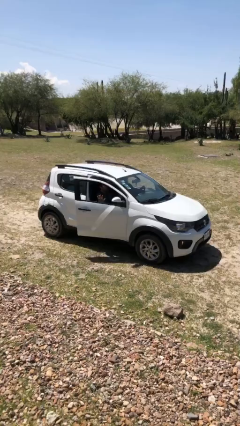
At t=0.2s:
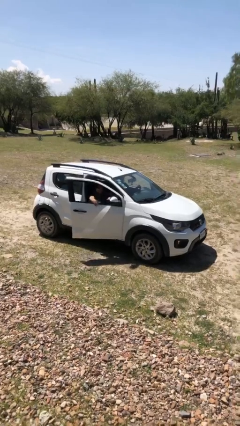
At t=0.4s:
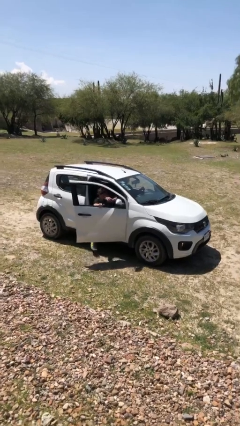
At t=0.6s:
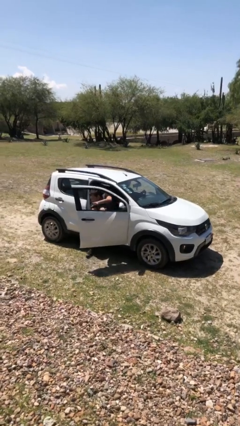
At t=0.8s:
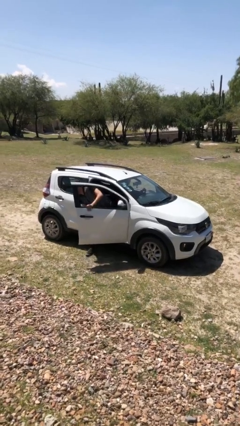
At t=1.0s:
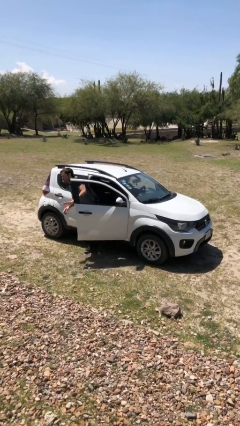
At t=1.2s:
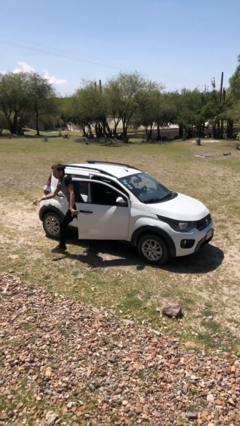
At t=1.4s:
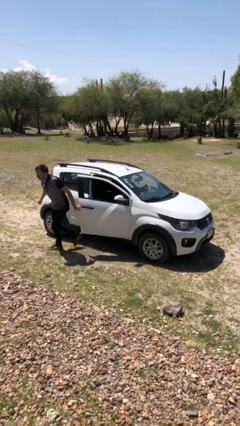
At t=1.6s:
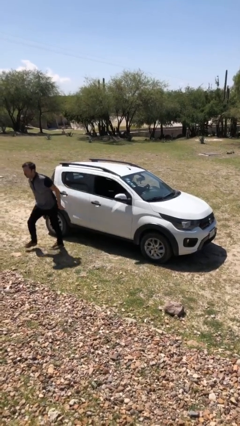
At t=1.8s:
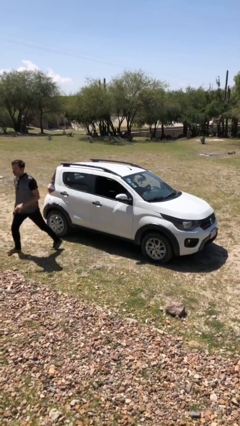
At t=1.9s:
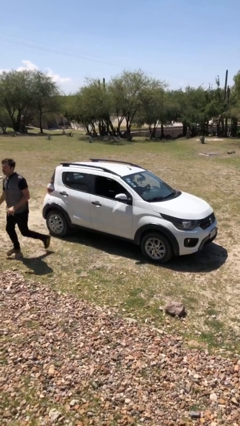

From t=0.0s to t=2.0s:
car drops off person

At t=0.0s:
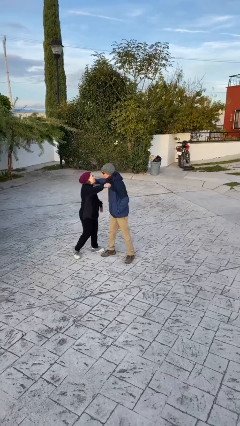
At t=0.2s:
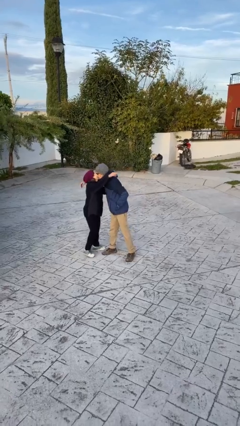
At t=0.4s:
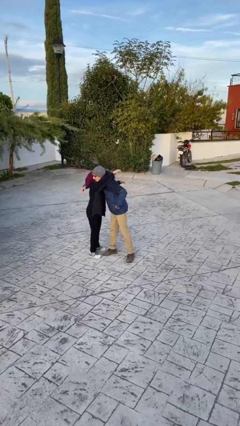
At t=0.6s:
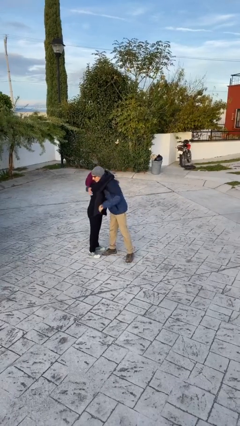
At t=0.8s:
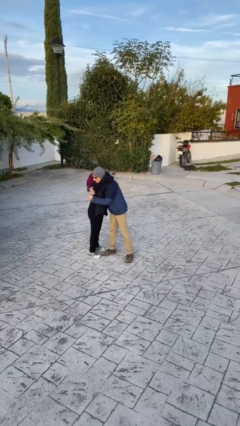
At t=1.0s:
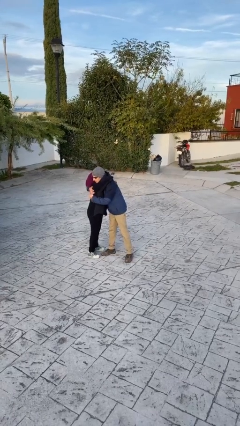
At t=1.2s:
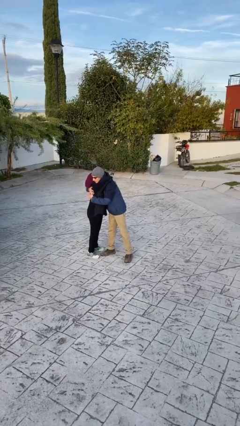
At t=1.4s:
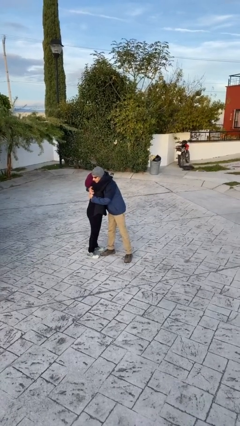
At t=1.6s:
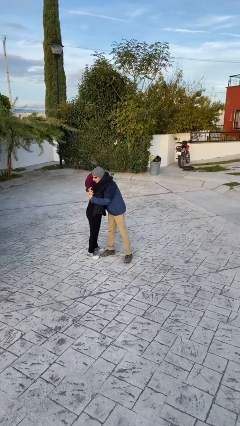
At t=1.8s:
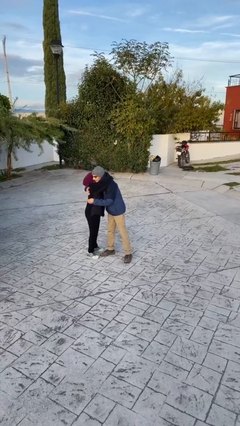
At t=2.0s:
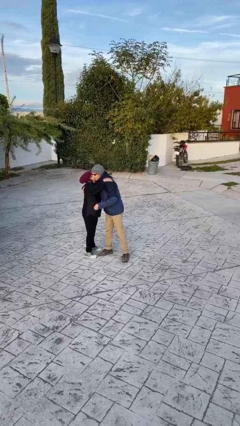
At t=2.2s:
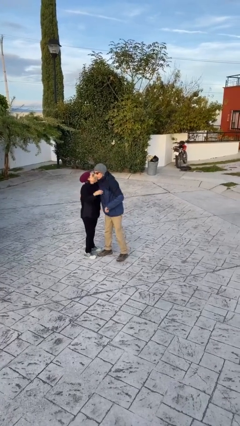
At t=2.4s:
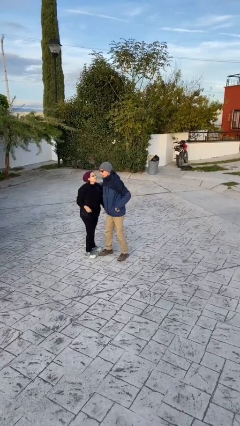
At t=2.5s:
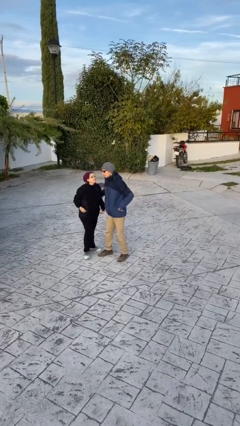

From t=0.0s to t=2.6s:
person embraces person

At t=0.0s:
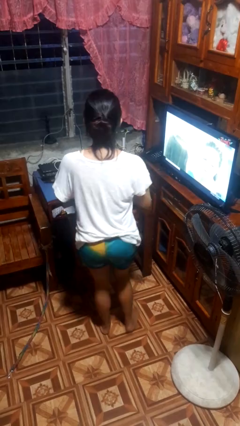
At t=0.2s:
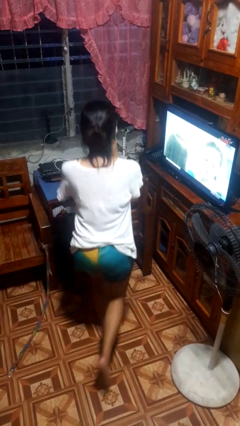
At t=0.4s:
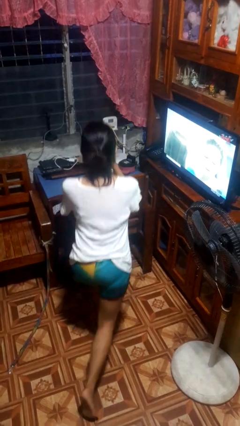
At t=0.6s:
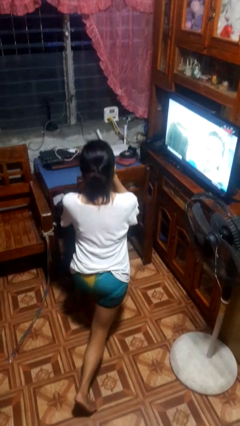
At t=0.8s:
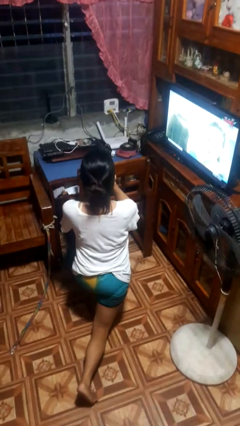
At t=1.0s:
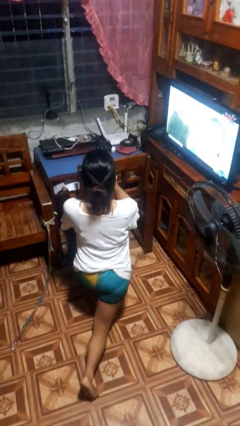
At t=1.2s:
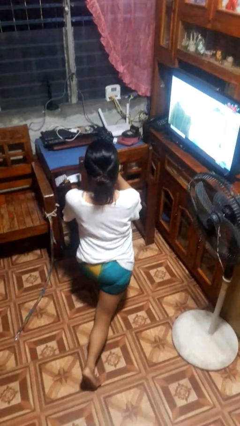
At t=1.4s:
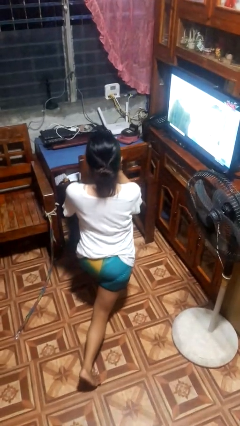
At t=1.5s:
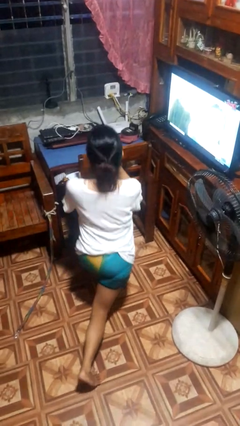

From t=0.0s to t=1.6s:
person exercises with lunges

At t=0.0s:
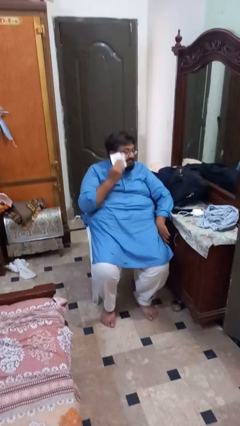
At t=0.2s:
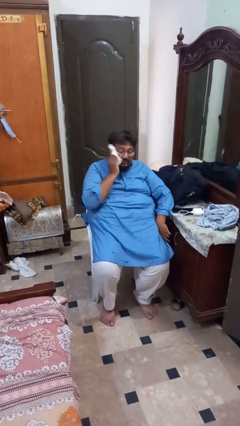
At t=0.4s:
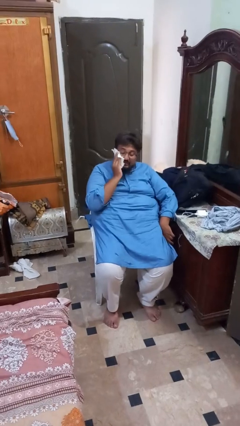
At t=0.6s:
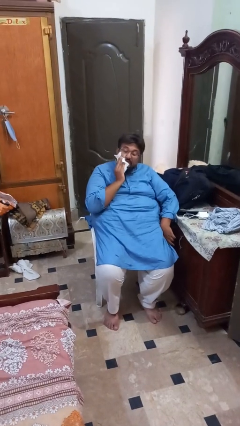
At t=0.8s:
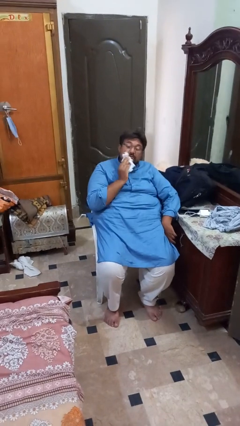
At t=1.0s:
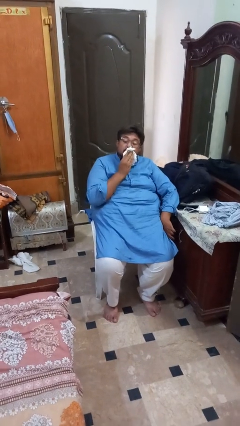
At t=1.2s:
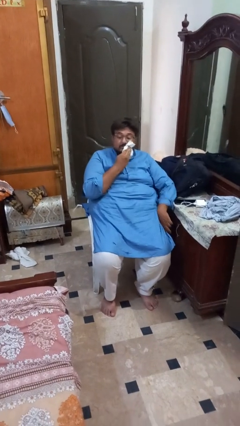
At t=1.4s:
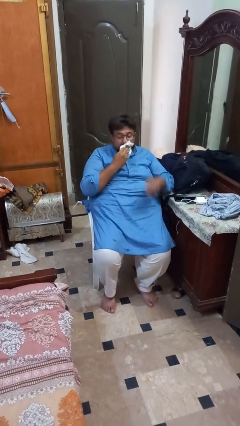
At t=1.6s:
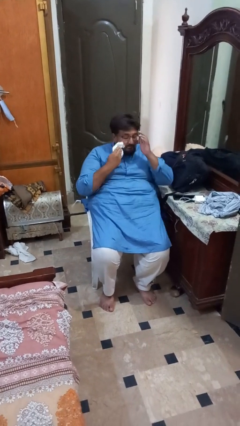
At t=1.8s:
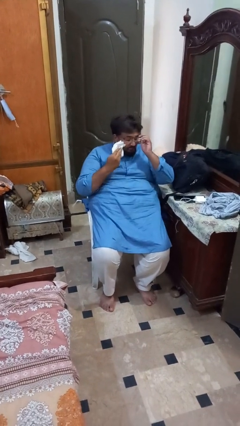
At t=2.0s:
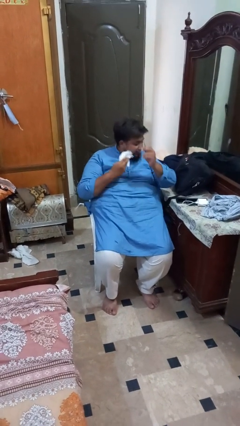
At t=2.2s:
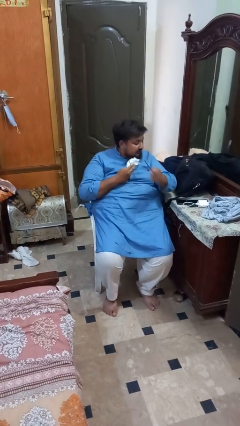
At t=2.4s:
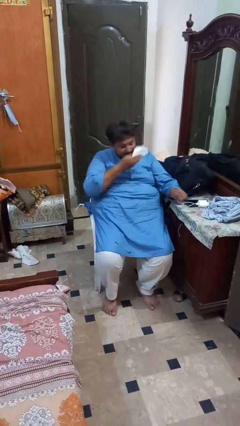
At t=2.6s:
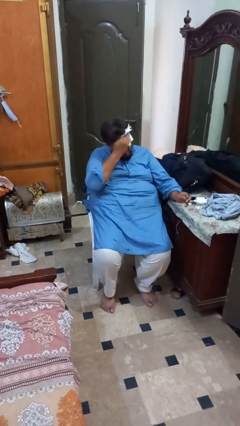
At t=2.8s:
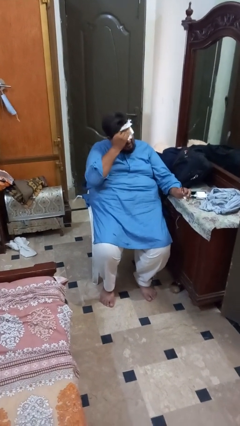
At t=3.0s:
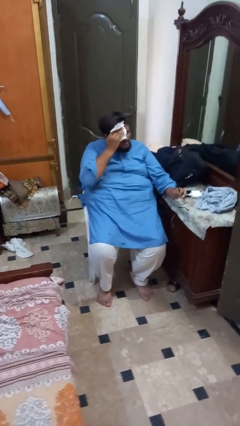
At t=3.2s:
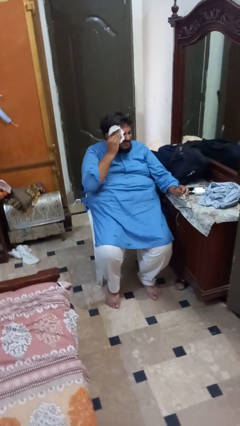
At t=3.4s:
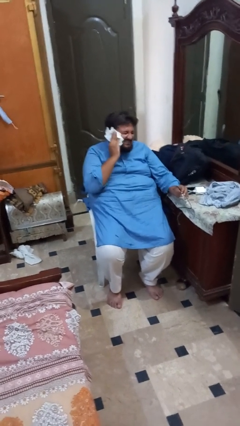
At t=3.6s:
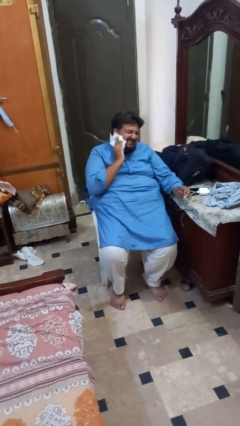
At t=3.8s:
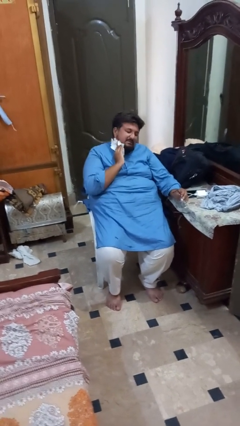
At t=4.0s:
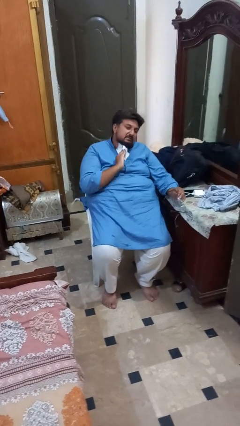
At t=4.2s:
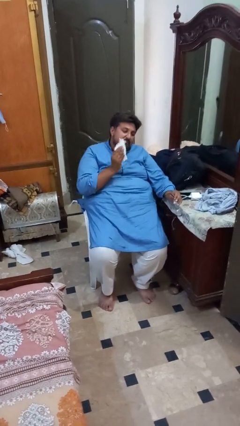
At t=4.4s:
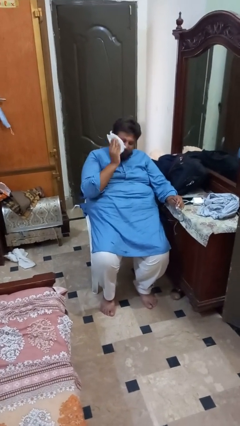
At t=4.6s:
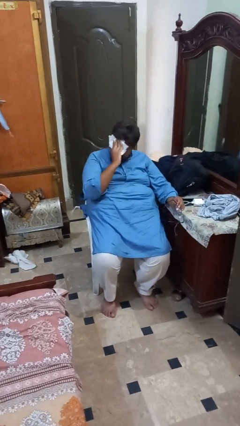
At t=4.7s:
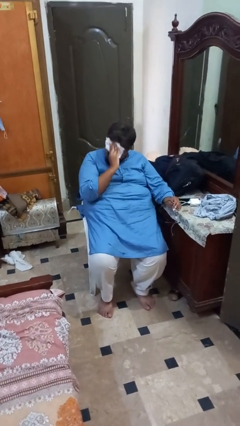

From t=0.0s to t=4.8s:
person wipes mouth with napkin

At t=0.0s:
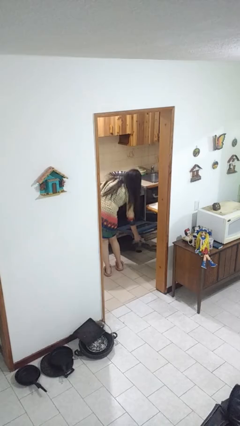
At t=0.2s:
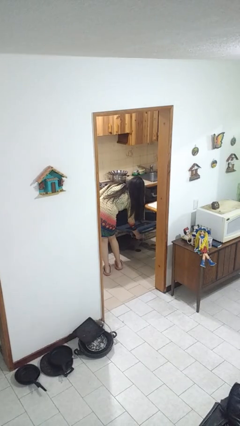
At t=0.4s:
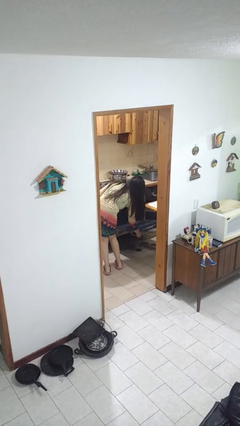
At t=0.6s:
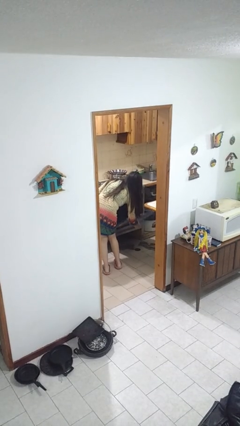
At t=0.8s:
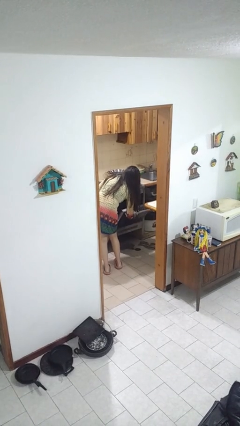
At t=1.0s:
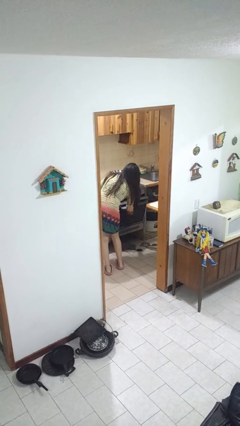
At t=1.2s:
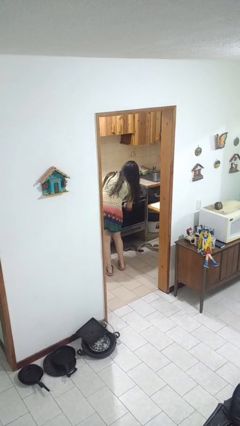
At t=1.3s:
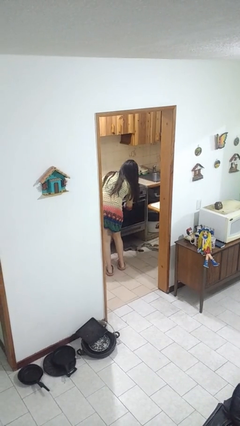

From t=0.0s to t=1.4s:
person closes oven door

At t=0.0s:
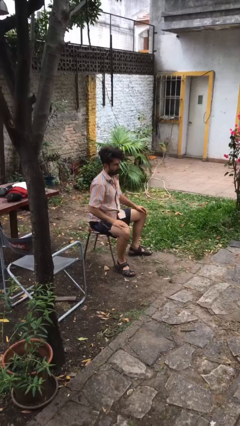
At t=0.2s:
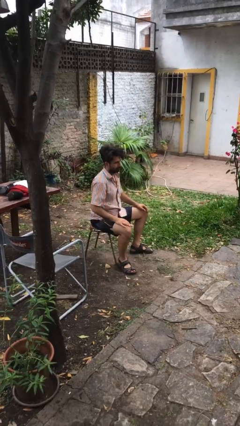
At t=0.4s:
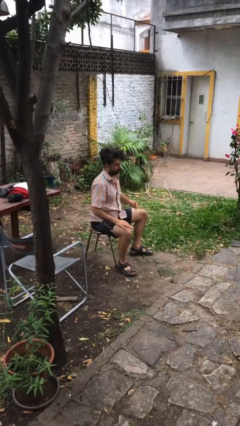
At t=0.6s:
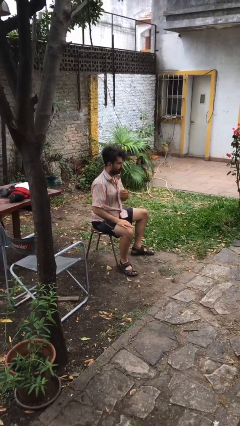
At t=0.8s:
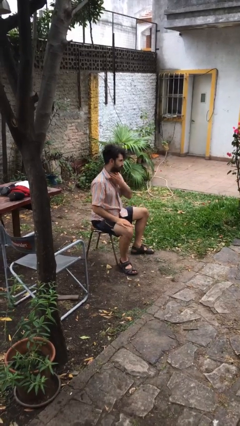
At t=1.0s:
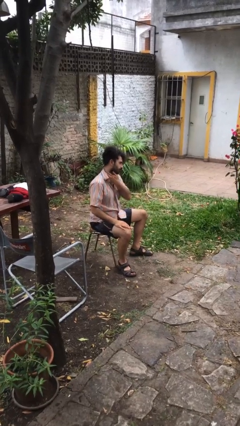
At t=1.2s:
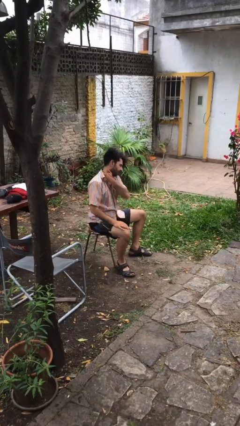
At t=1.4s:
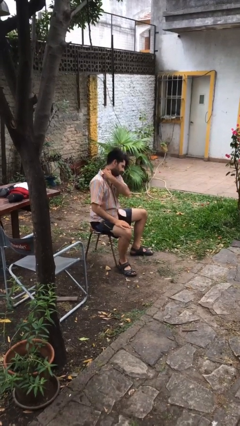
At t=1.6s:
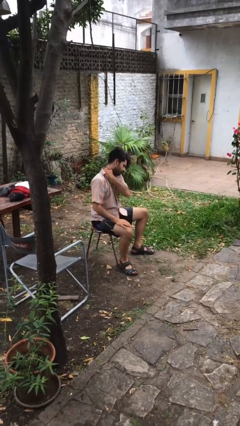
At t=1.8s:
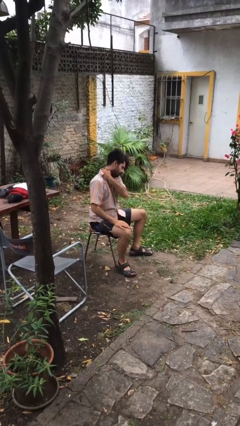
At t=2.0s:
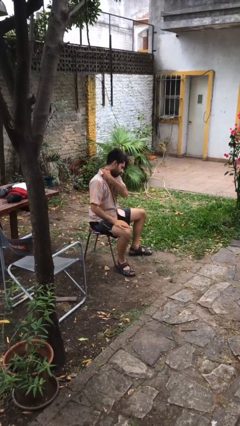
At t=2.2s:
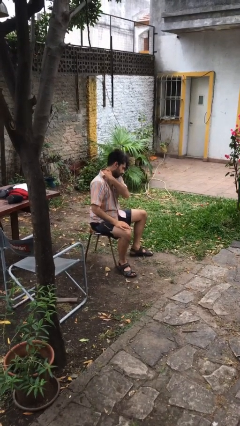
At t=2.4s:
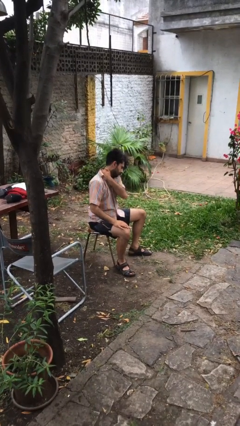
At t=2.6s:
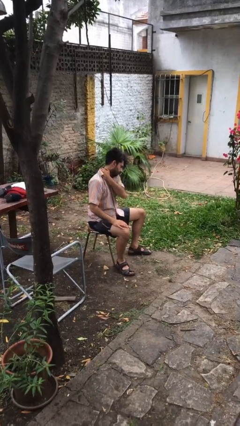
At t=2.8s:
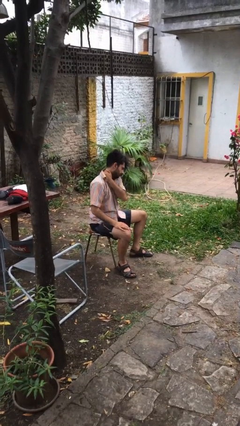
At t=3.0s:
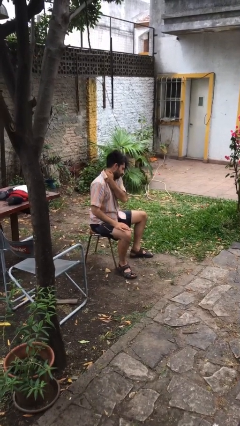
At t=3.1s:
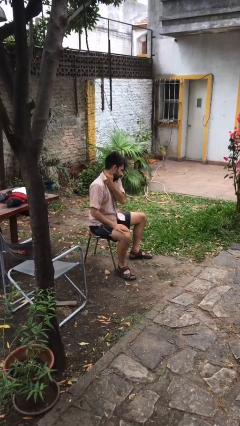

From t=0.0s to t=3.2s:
person rubs neck

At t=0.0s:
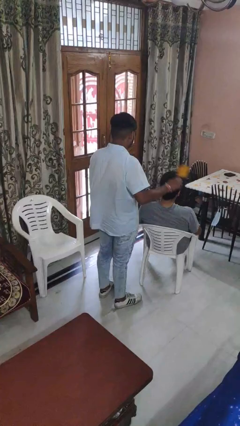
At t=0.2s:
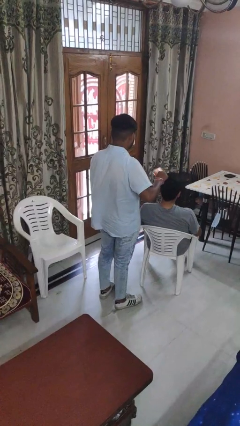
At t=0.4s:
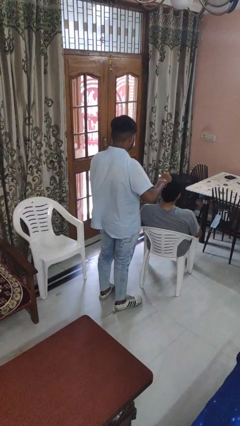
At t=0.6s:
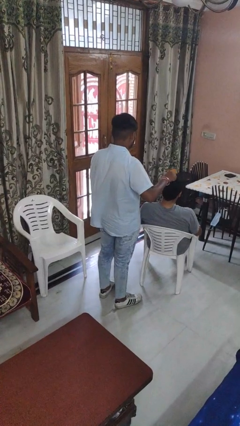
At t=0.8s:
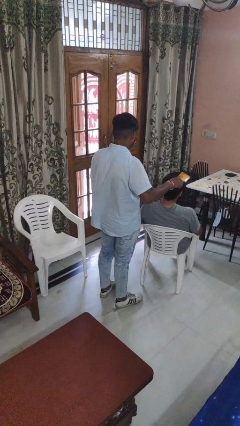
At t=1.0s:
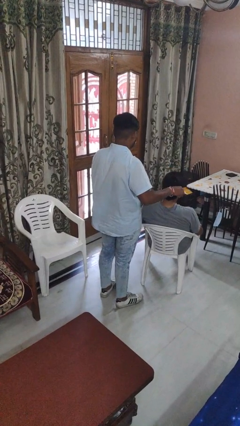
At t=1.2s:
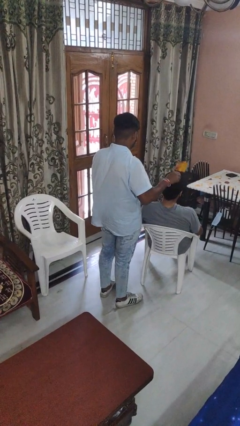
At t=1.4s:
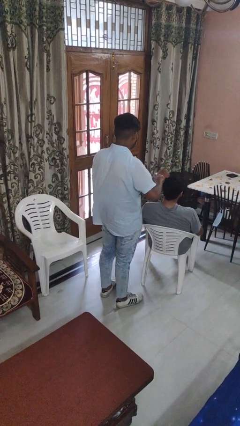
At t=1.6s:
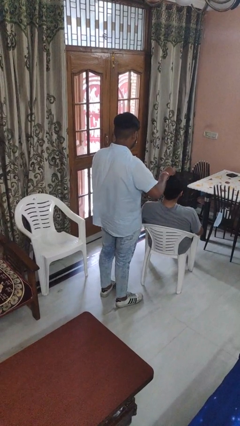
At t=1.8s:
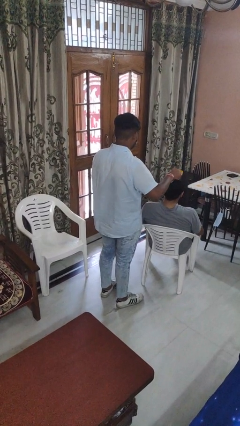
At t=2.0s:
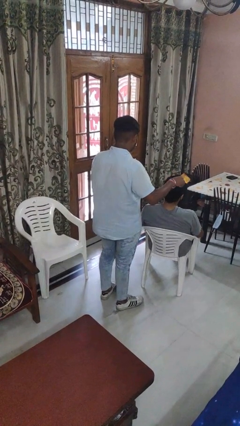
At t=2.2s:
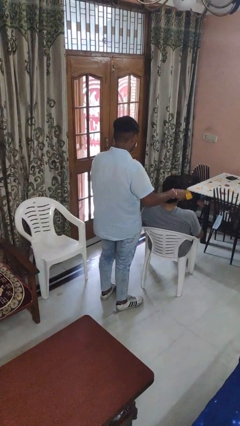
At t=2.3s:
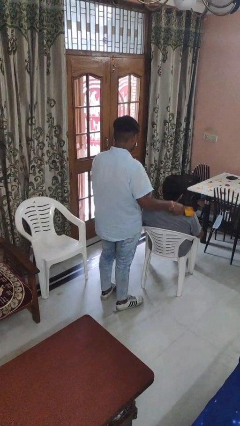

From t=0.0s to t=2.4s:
person brushes hair of person
